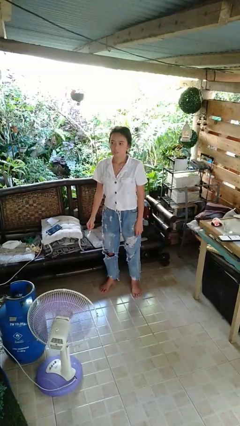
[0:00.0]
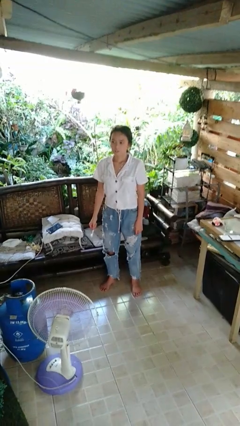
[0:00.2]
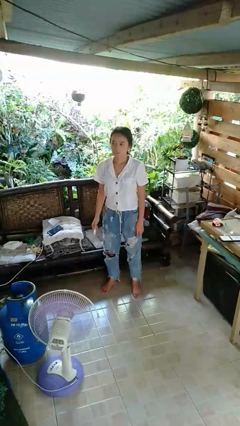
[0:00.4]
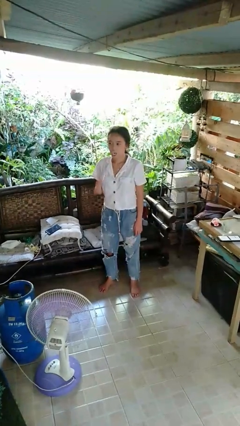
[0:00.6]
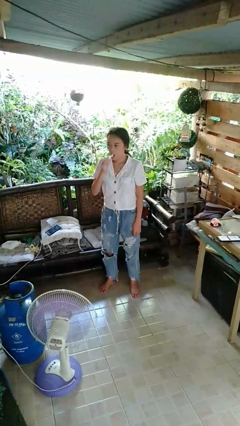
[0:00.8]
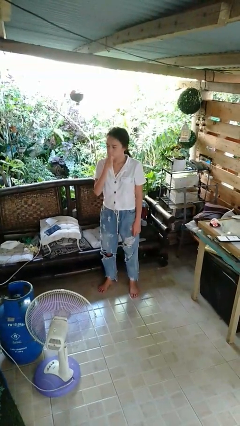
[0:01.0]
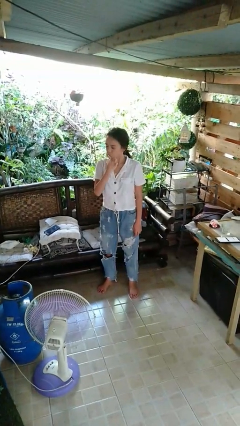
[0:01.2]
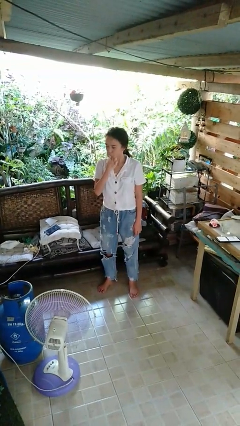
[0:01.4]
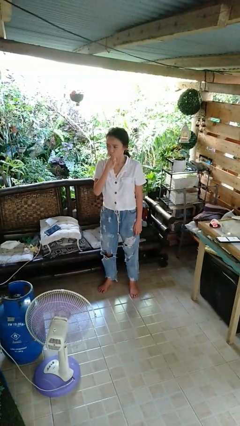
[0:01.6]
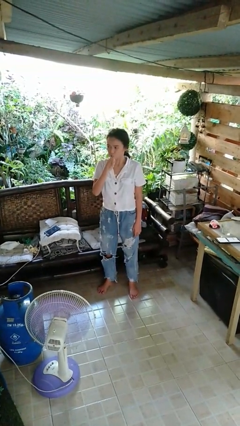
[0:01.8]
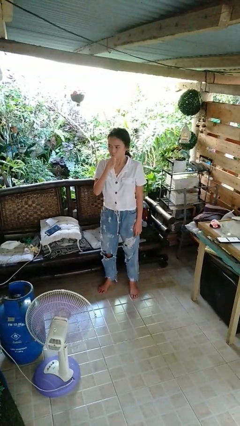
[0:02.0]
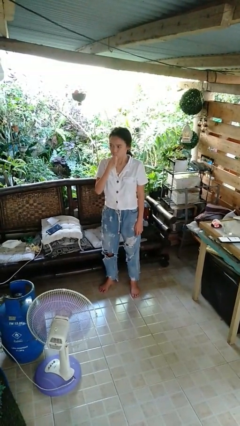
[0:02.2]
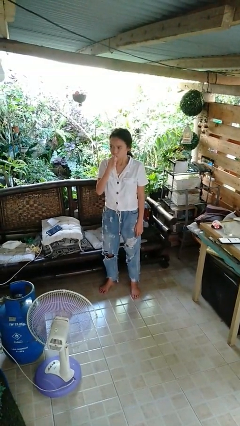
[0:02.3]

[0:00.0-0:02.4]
person brushes teeth

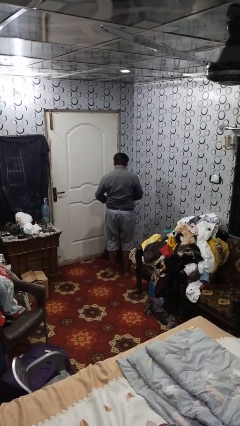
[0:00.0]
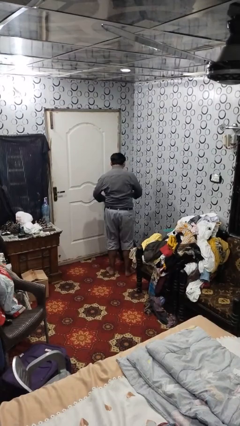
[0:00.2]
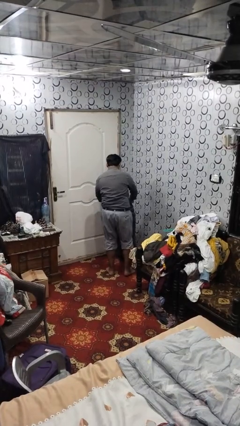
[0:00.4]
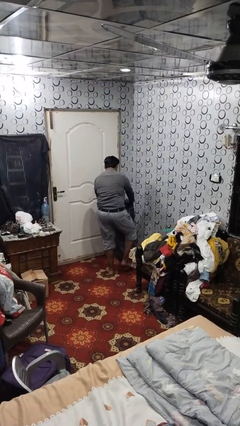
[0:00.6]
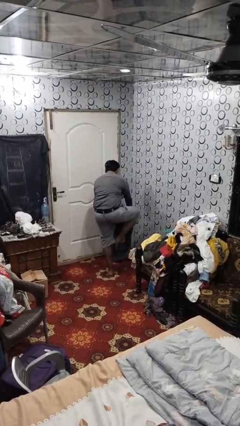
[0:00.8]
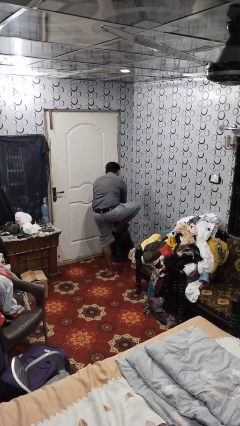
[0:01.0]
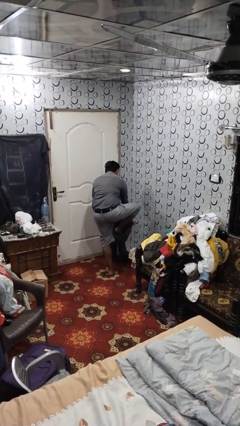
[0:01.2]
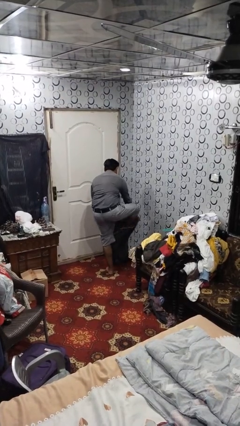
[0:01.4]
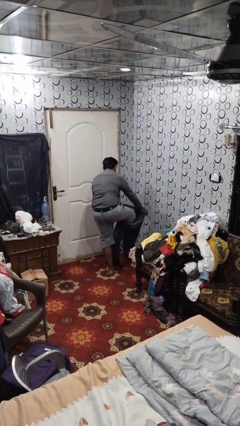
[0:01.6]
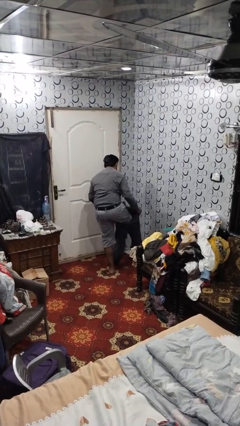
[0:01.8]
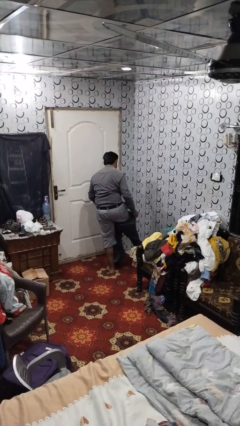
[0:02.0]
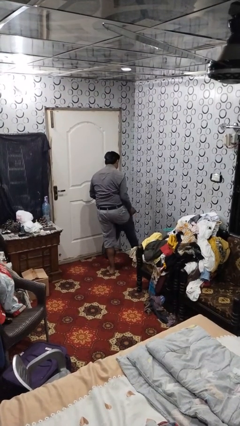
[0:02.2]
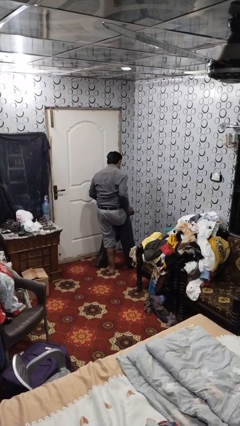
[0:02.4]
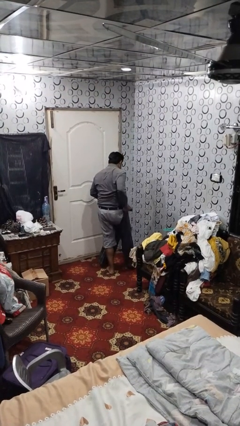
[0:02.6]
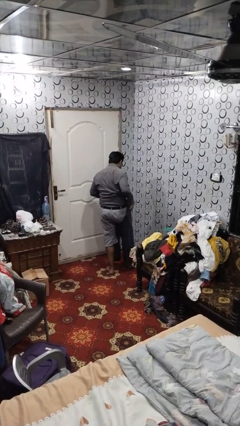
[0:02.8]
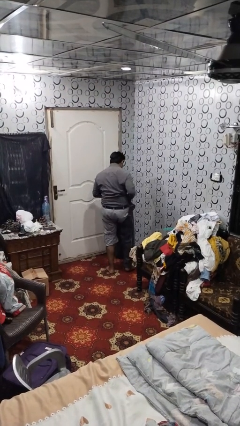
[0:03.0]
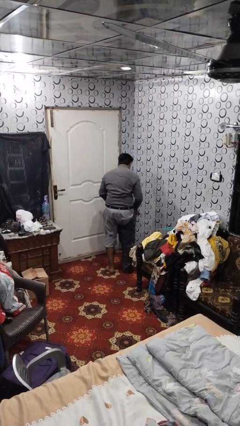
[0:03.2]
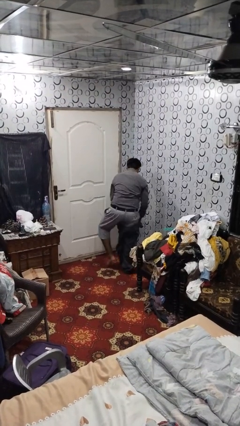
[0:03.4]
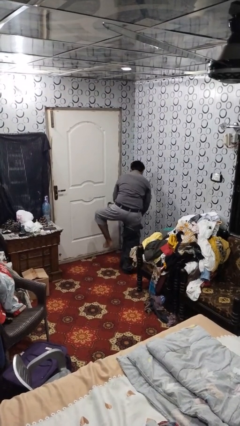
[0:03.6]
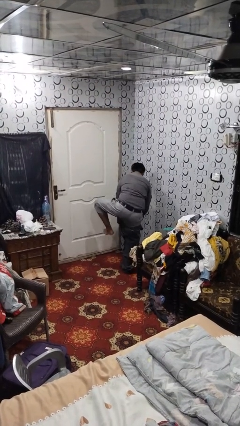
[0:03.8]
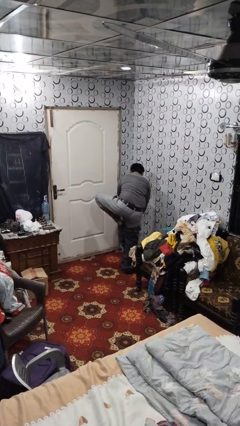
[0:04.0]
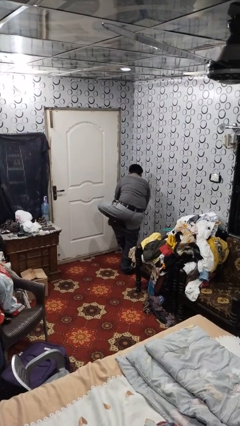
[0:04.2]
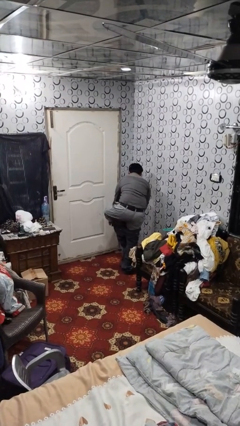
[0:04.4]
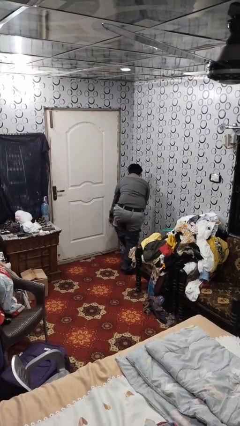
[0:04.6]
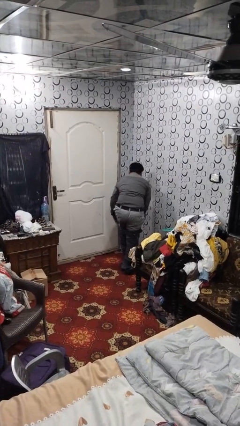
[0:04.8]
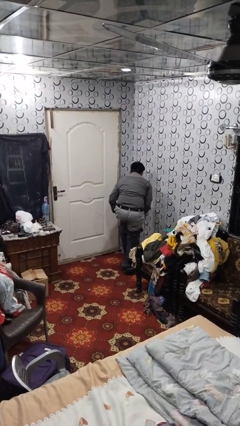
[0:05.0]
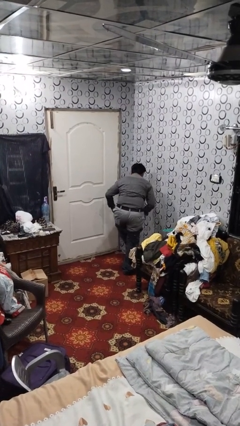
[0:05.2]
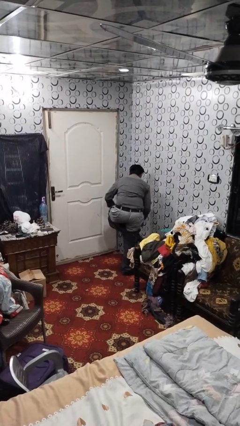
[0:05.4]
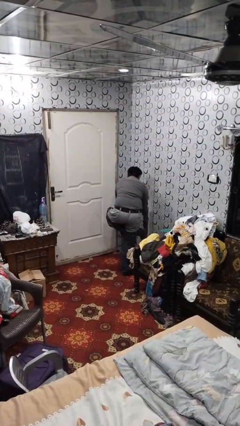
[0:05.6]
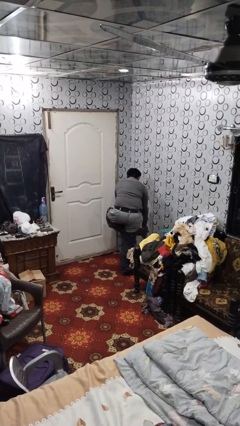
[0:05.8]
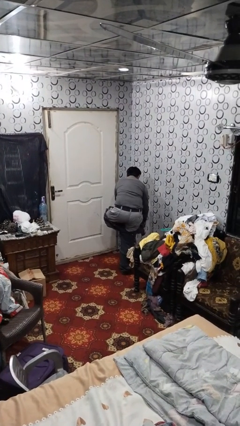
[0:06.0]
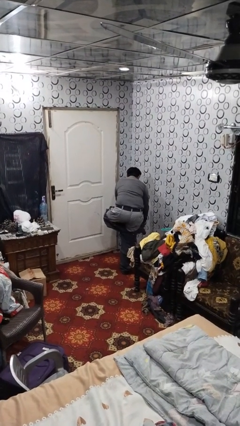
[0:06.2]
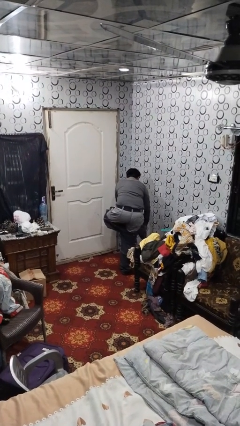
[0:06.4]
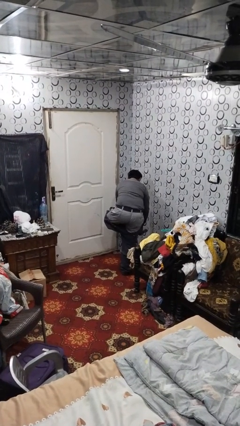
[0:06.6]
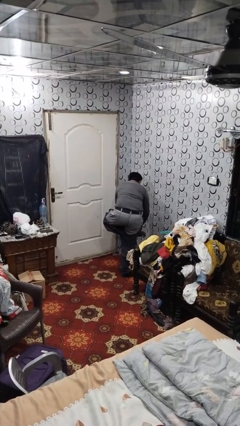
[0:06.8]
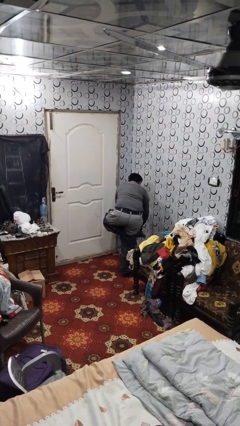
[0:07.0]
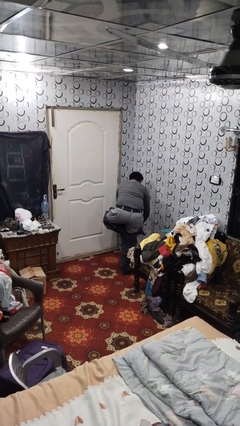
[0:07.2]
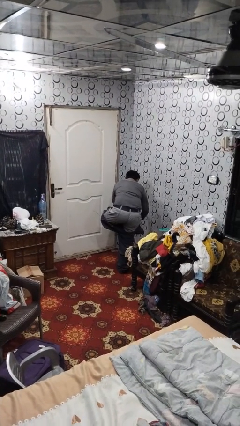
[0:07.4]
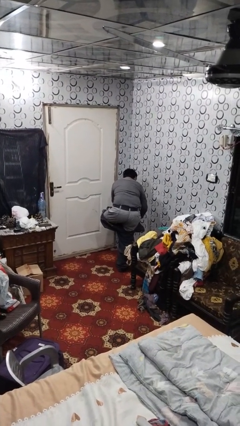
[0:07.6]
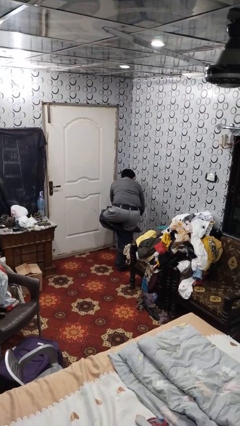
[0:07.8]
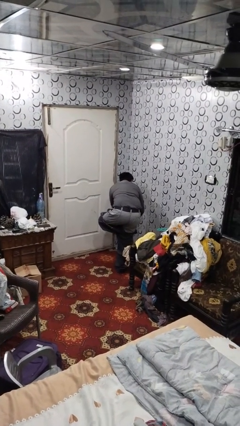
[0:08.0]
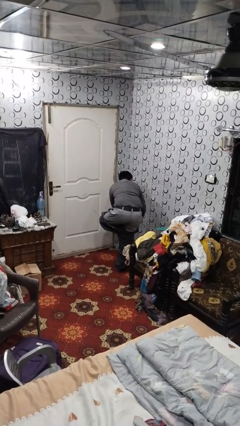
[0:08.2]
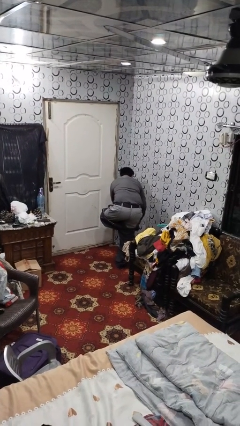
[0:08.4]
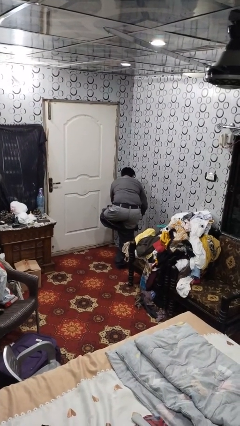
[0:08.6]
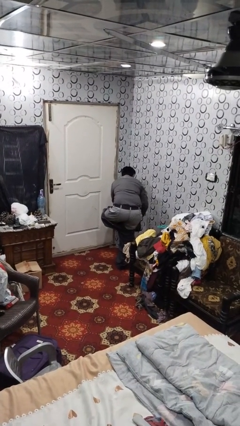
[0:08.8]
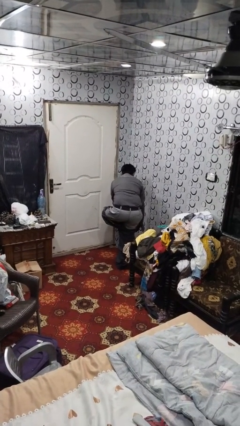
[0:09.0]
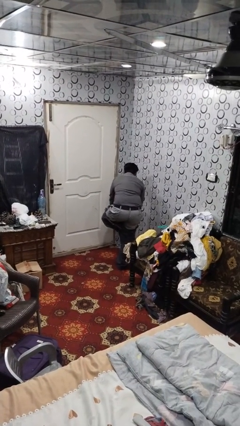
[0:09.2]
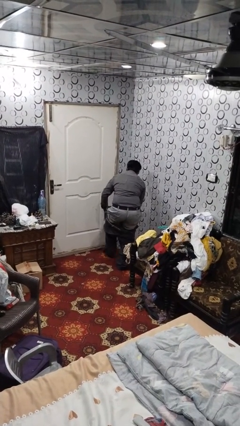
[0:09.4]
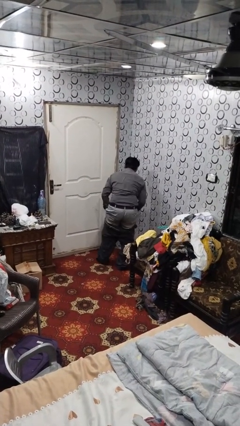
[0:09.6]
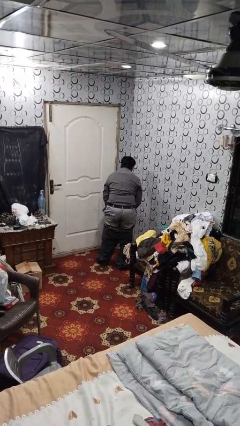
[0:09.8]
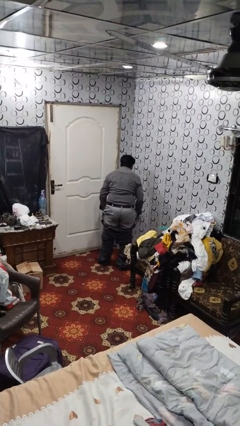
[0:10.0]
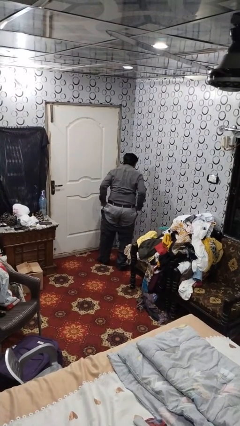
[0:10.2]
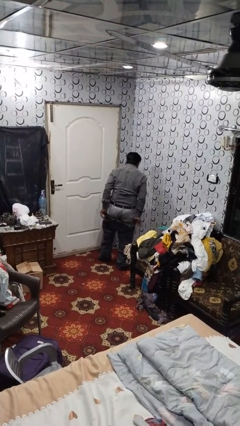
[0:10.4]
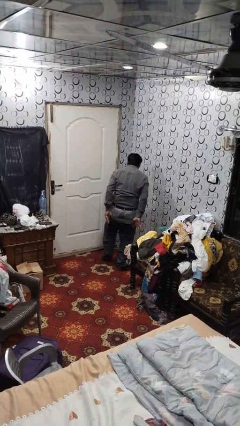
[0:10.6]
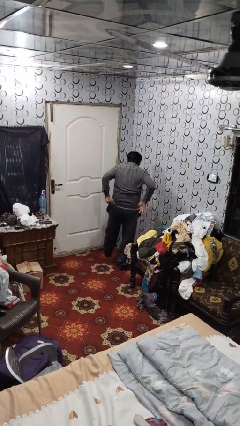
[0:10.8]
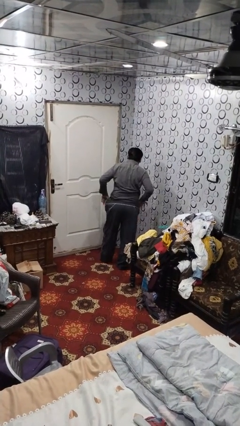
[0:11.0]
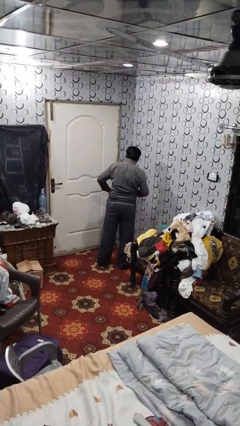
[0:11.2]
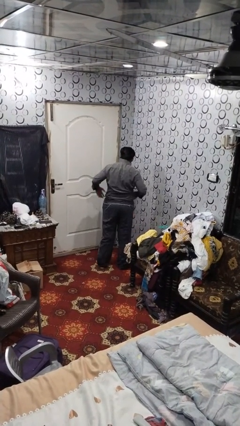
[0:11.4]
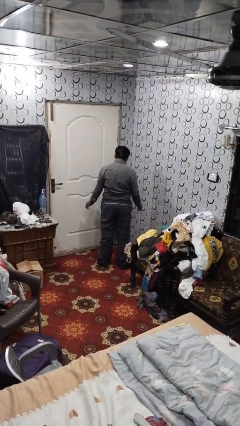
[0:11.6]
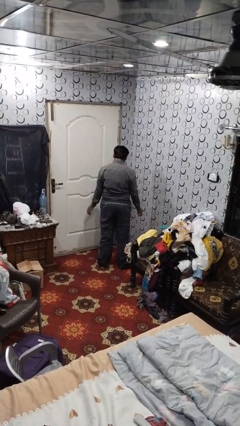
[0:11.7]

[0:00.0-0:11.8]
person puts on pants

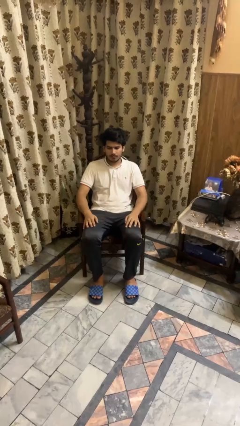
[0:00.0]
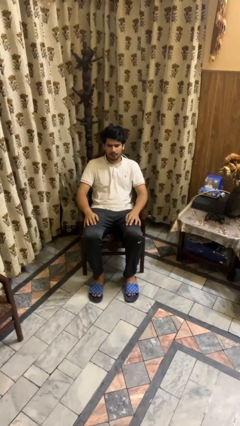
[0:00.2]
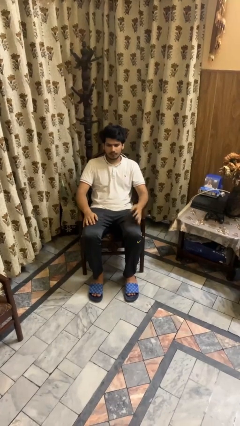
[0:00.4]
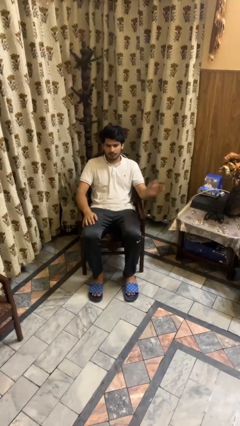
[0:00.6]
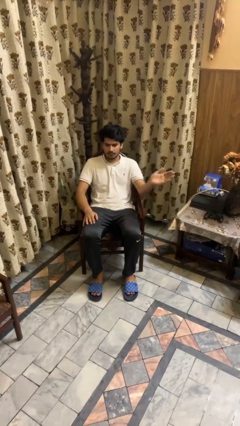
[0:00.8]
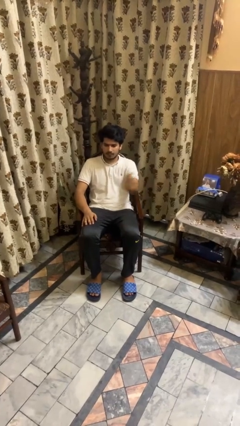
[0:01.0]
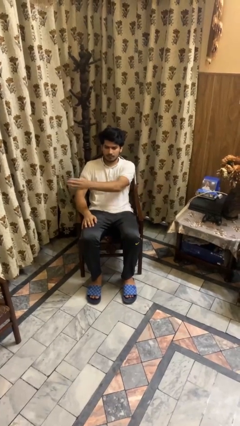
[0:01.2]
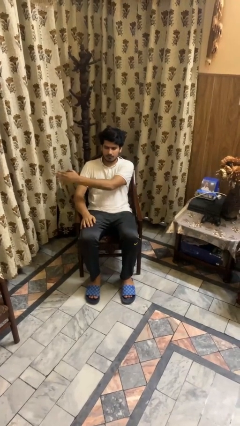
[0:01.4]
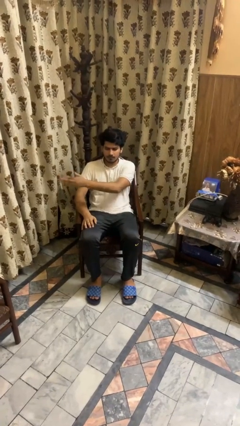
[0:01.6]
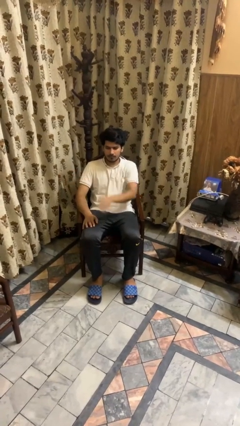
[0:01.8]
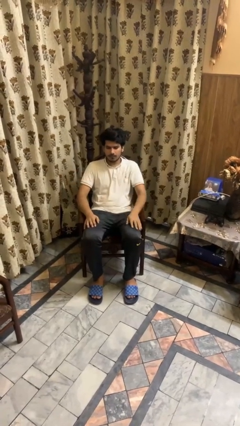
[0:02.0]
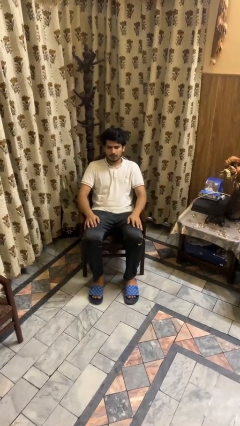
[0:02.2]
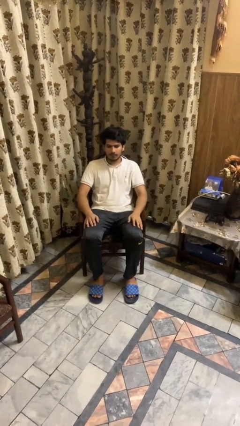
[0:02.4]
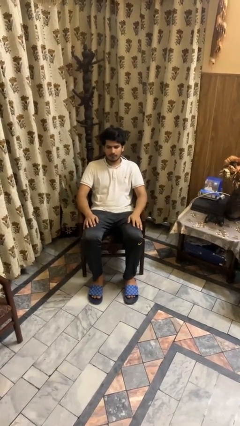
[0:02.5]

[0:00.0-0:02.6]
person gestures swipe right

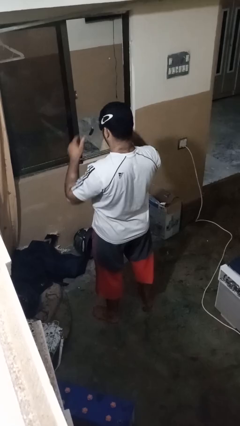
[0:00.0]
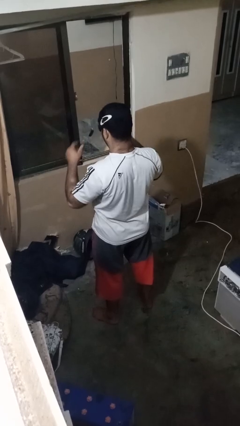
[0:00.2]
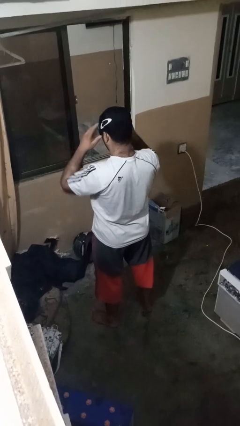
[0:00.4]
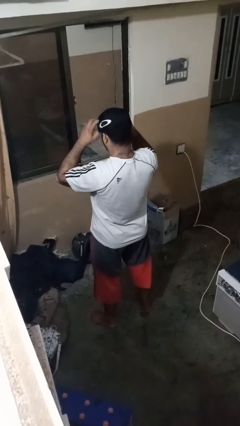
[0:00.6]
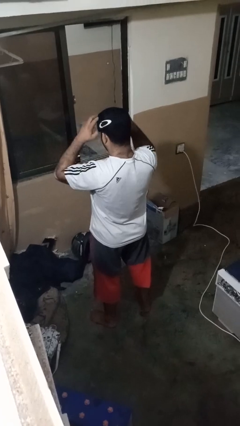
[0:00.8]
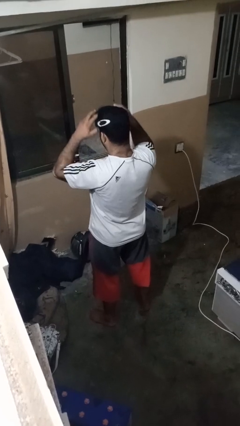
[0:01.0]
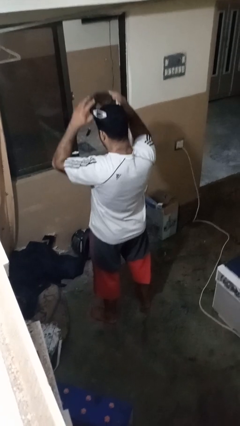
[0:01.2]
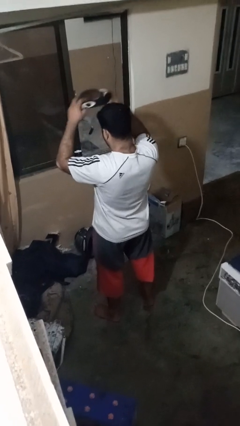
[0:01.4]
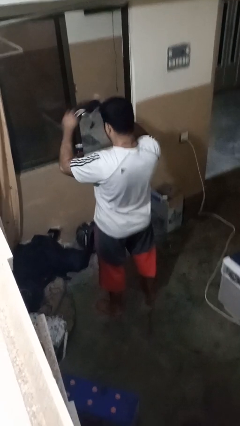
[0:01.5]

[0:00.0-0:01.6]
person takes off sunglasses
